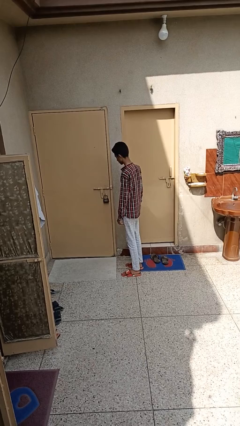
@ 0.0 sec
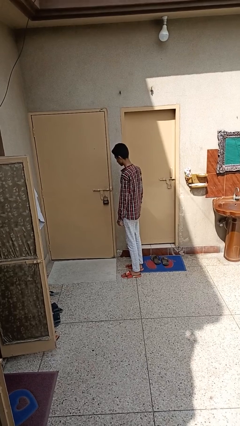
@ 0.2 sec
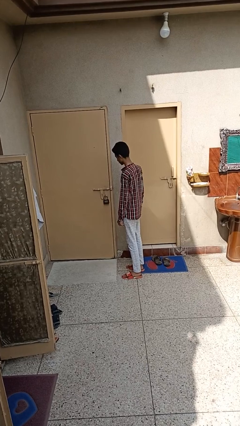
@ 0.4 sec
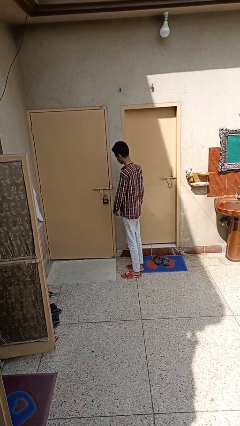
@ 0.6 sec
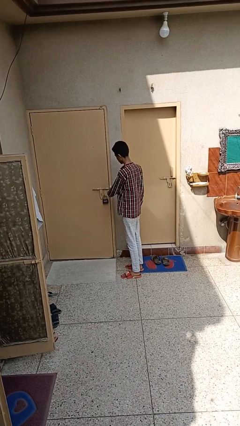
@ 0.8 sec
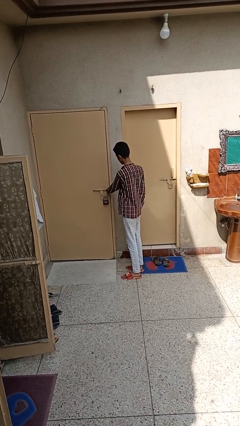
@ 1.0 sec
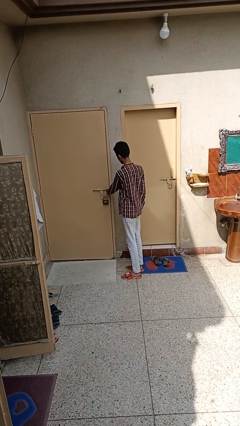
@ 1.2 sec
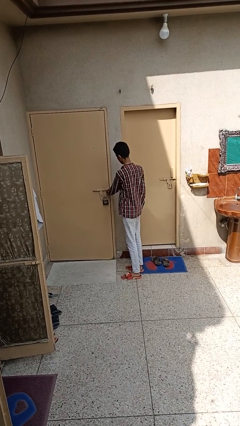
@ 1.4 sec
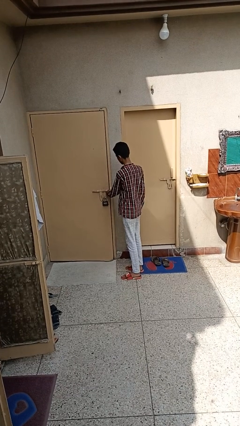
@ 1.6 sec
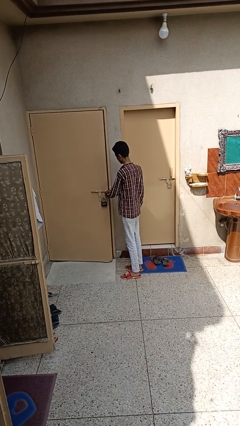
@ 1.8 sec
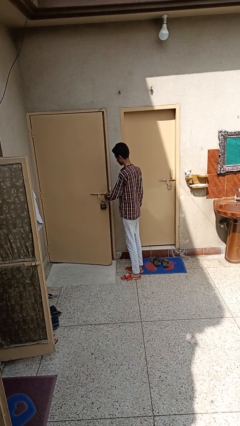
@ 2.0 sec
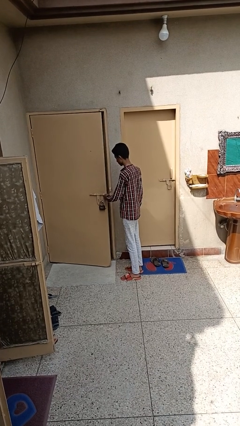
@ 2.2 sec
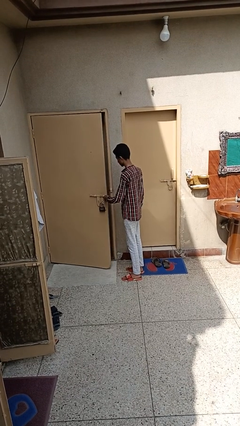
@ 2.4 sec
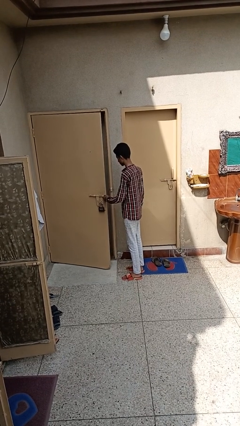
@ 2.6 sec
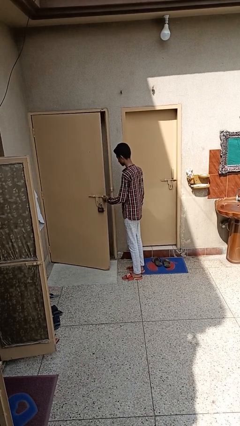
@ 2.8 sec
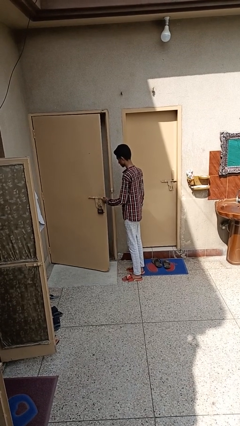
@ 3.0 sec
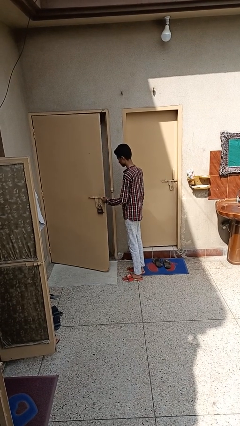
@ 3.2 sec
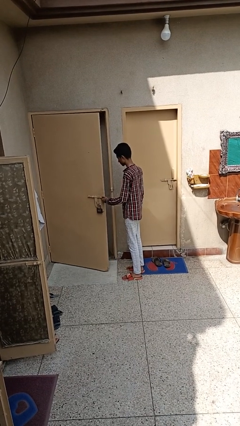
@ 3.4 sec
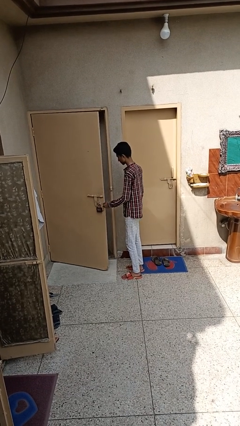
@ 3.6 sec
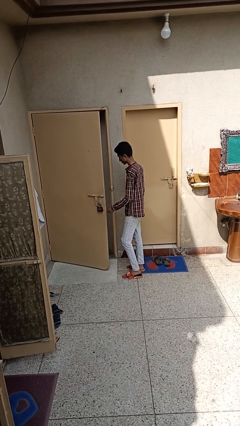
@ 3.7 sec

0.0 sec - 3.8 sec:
person opens facility door

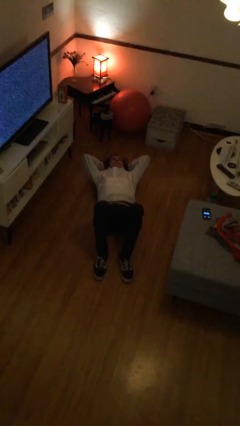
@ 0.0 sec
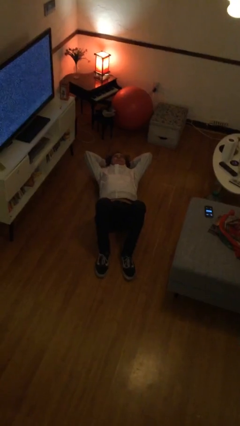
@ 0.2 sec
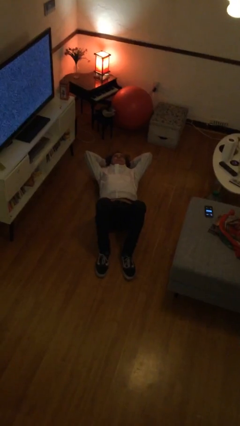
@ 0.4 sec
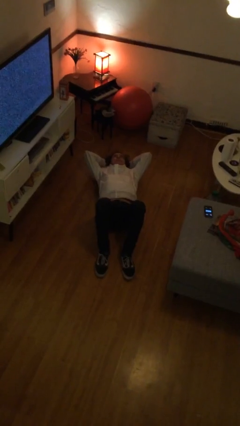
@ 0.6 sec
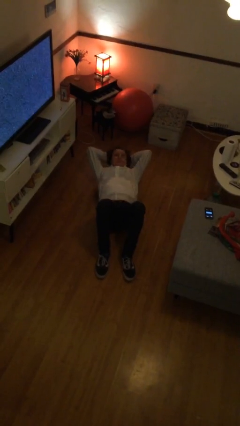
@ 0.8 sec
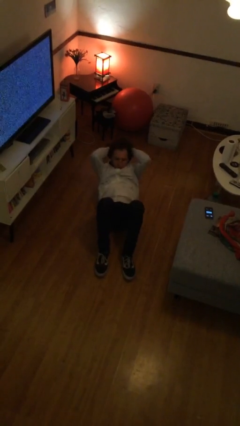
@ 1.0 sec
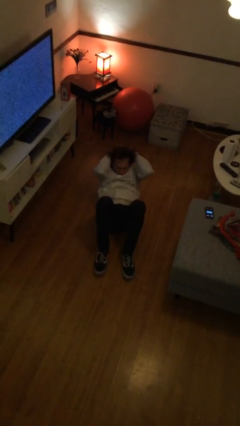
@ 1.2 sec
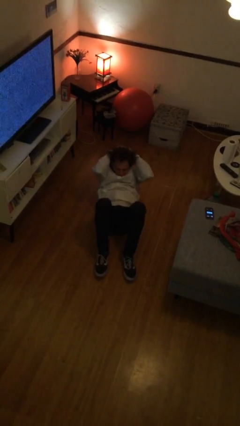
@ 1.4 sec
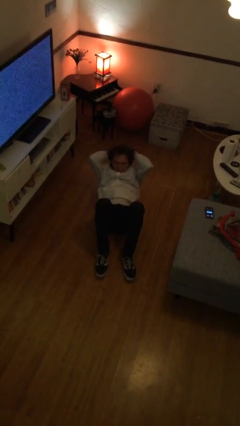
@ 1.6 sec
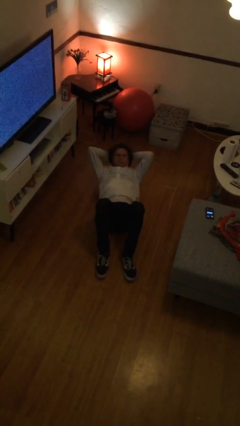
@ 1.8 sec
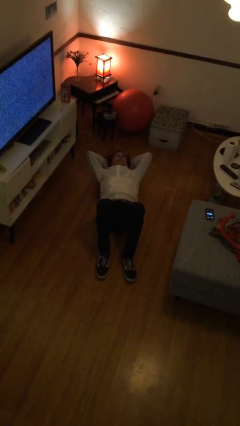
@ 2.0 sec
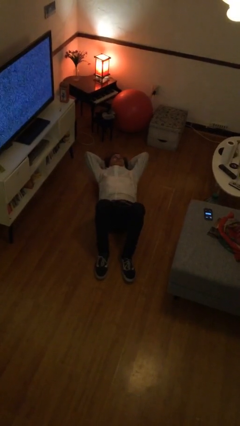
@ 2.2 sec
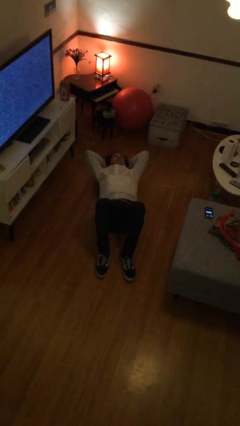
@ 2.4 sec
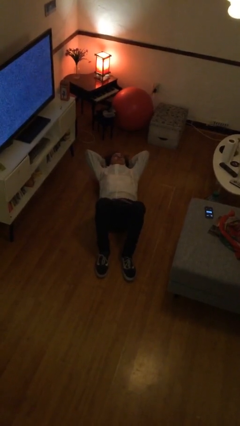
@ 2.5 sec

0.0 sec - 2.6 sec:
person exercises with situp

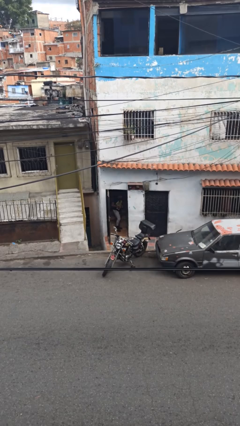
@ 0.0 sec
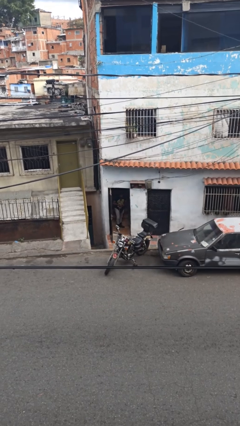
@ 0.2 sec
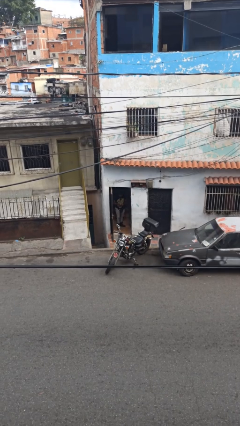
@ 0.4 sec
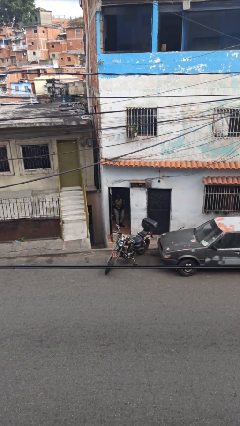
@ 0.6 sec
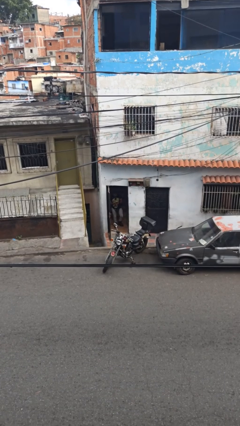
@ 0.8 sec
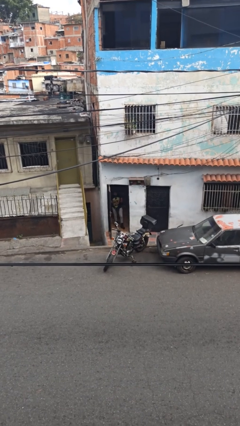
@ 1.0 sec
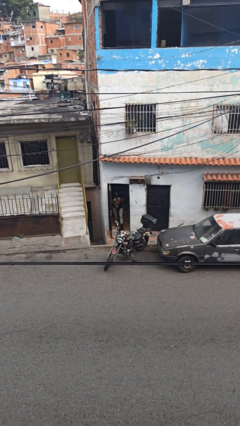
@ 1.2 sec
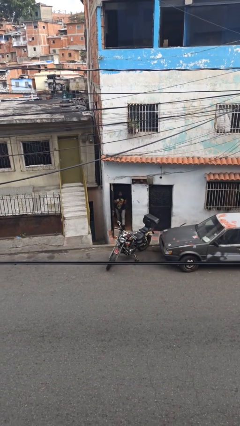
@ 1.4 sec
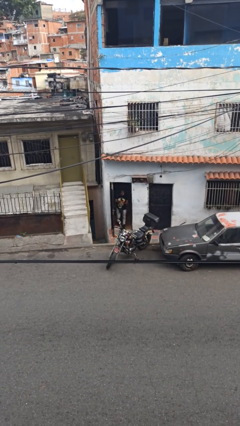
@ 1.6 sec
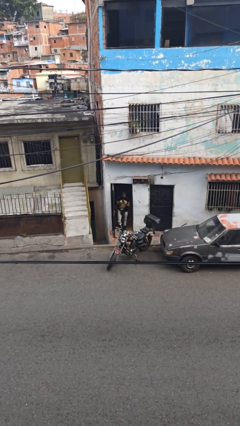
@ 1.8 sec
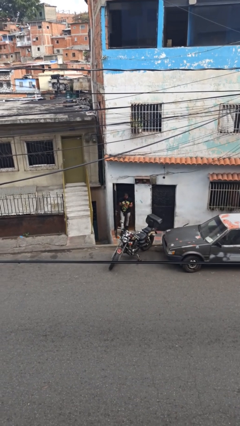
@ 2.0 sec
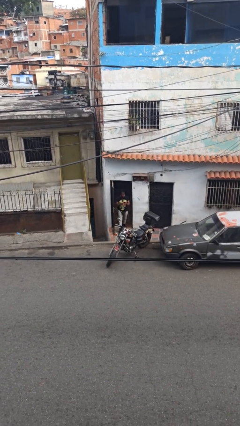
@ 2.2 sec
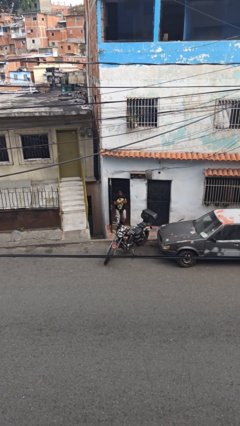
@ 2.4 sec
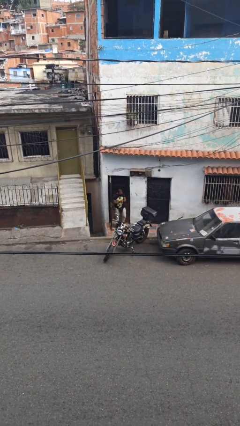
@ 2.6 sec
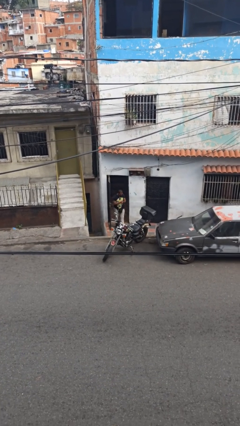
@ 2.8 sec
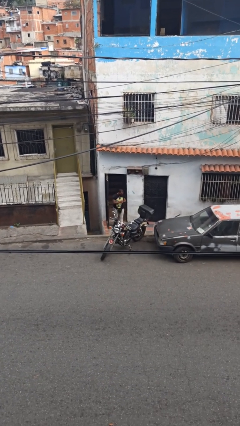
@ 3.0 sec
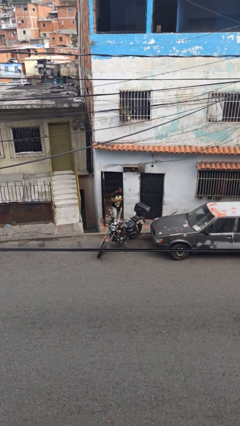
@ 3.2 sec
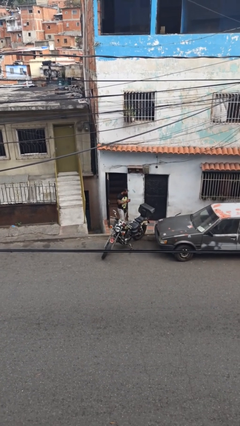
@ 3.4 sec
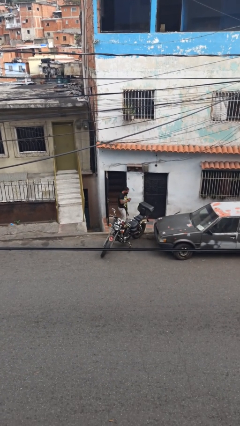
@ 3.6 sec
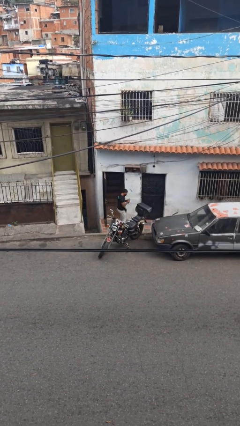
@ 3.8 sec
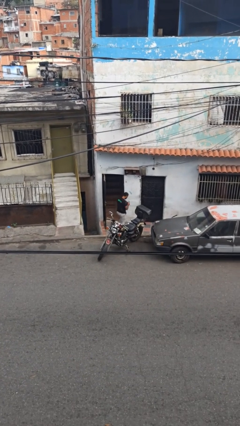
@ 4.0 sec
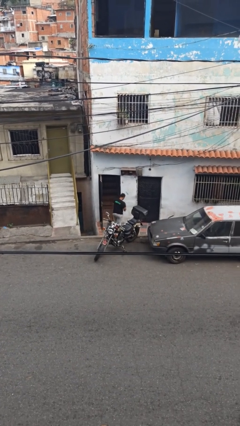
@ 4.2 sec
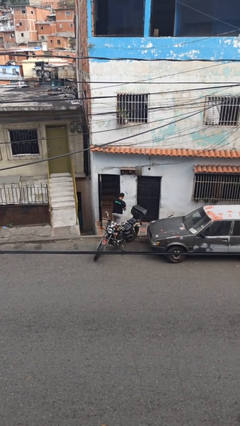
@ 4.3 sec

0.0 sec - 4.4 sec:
person enters scene through structure

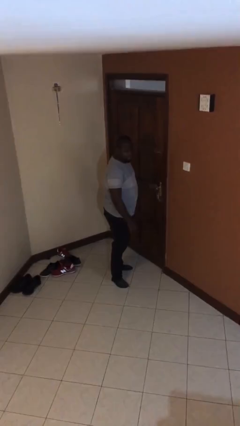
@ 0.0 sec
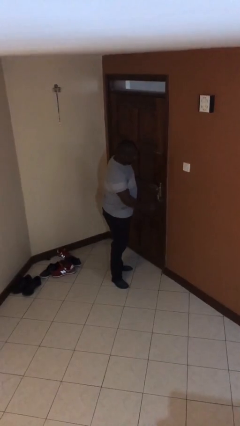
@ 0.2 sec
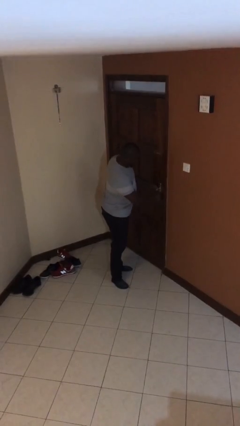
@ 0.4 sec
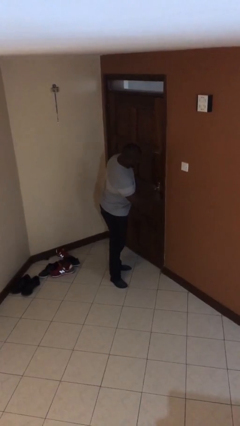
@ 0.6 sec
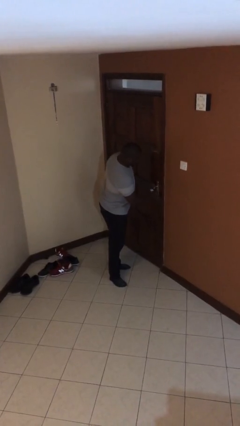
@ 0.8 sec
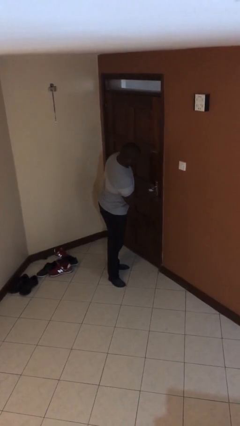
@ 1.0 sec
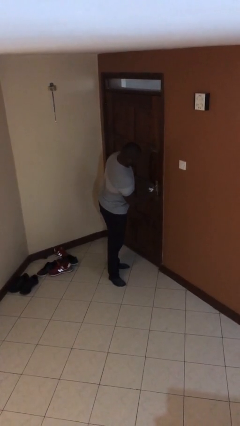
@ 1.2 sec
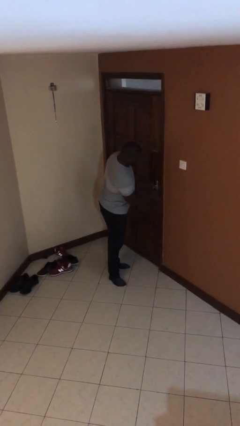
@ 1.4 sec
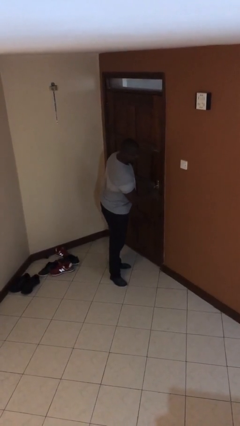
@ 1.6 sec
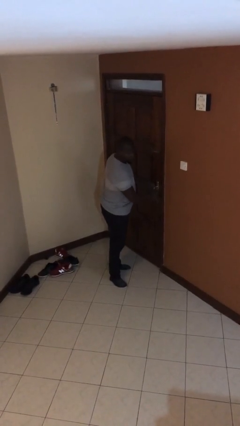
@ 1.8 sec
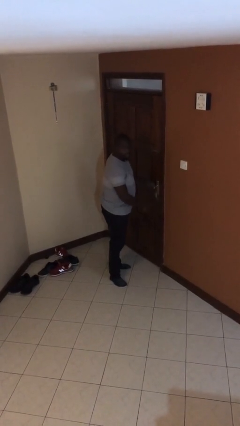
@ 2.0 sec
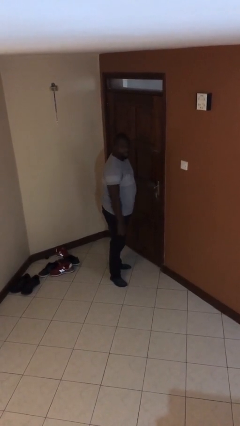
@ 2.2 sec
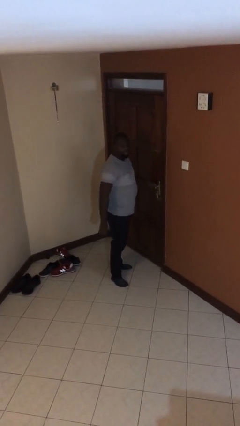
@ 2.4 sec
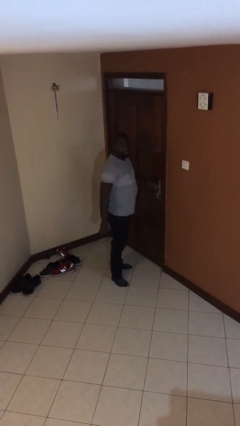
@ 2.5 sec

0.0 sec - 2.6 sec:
person locks door with keys

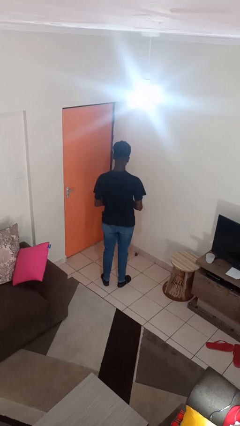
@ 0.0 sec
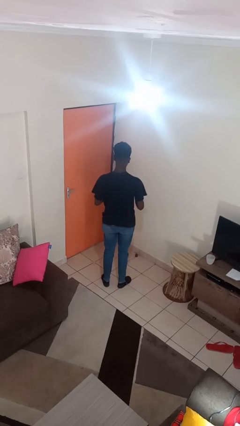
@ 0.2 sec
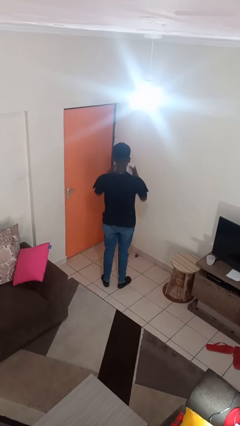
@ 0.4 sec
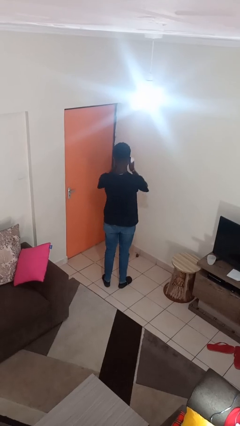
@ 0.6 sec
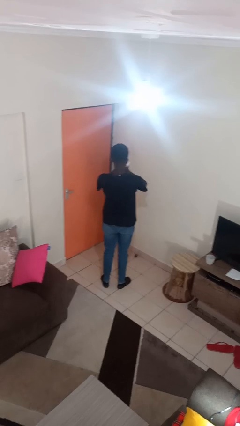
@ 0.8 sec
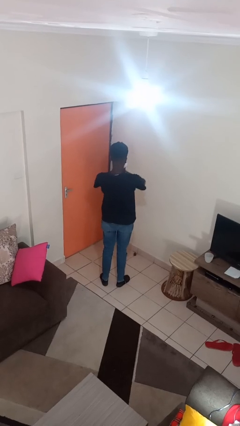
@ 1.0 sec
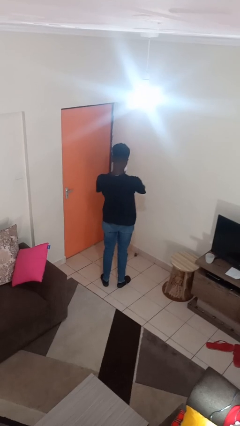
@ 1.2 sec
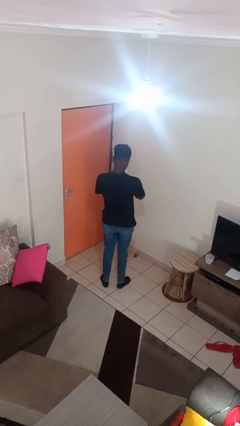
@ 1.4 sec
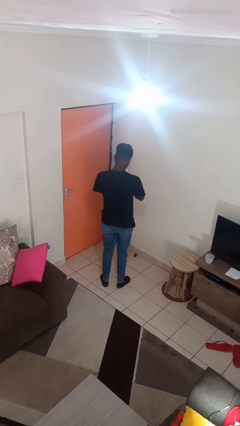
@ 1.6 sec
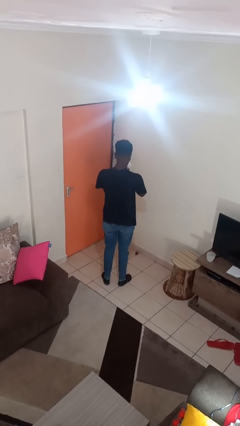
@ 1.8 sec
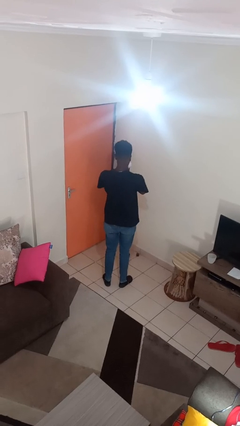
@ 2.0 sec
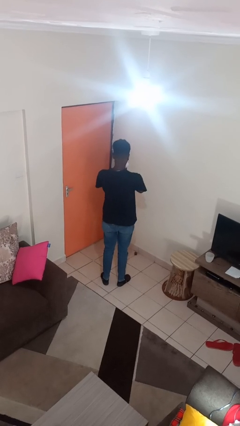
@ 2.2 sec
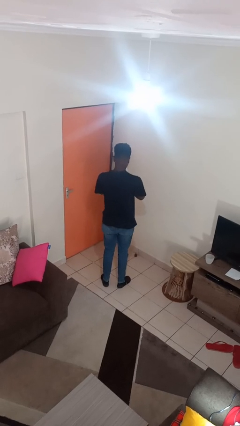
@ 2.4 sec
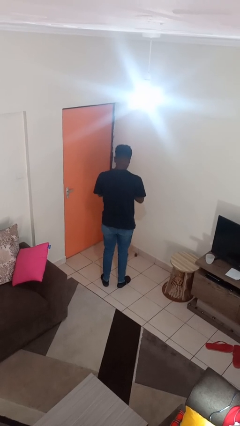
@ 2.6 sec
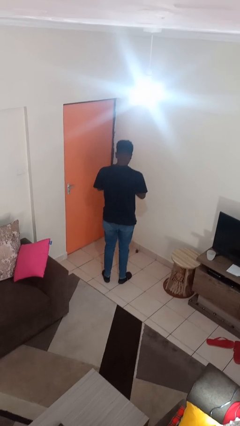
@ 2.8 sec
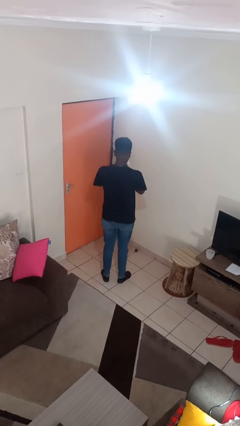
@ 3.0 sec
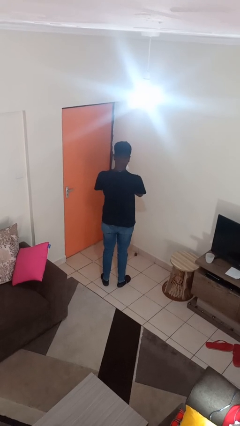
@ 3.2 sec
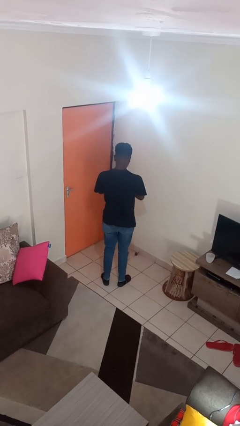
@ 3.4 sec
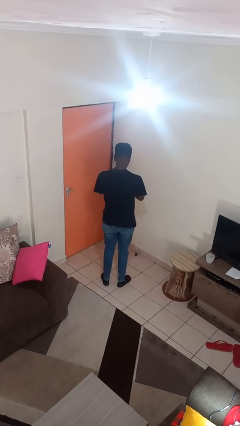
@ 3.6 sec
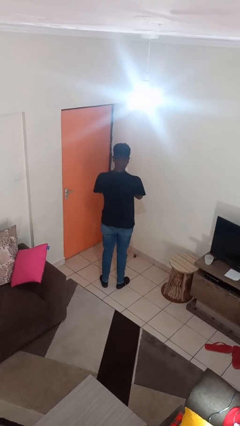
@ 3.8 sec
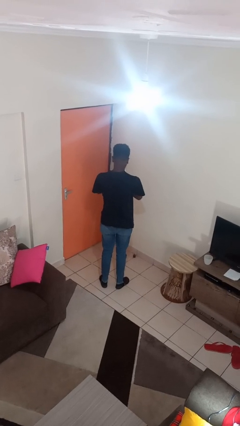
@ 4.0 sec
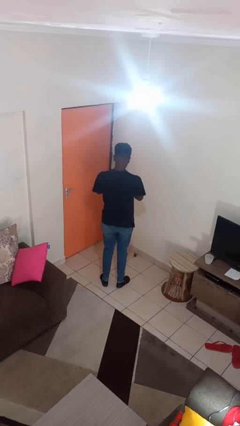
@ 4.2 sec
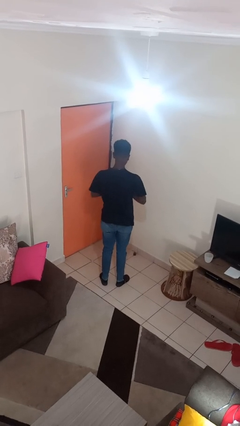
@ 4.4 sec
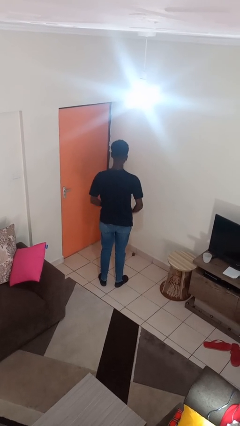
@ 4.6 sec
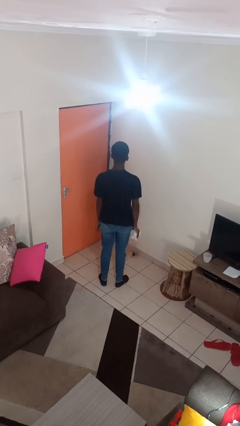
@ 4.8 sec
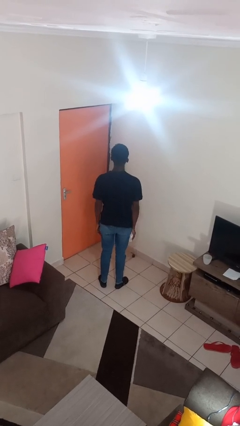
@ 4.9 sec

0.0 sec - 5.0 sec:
person blows nose
